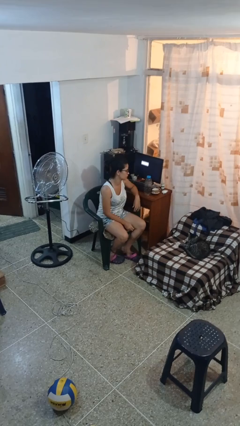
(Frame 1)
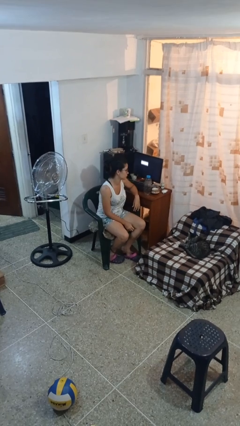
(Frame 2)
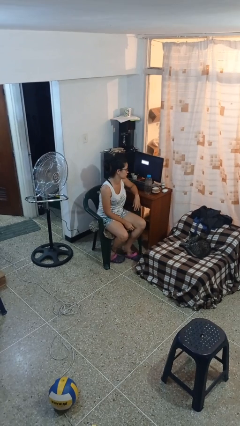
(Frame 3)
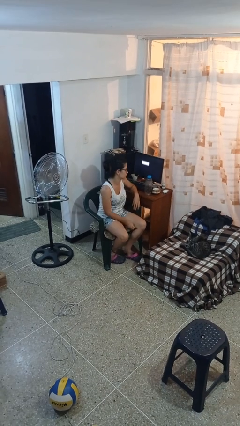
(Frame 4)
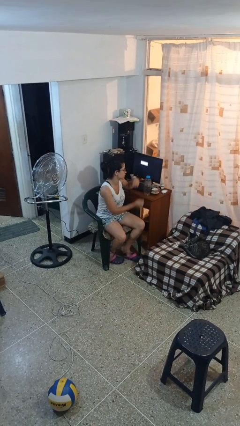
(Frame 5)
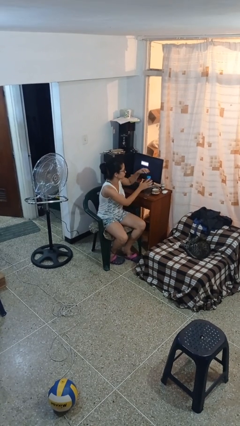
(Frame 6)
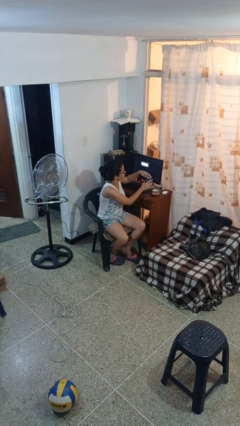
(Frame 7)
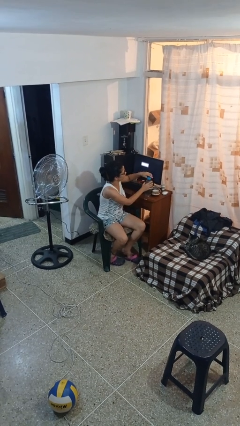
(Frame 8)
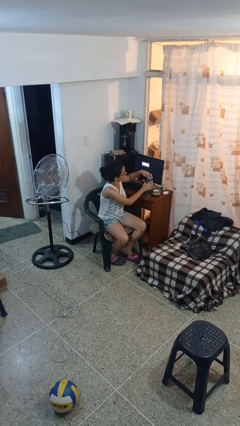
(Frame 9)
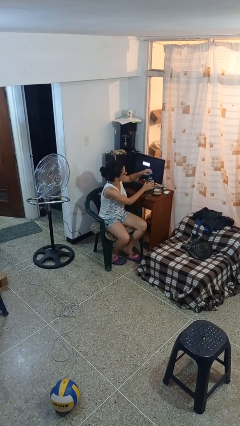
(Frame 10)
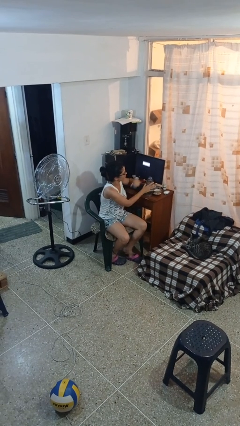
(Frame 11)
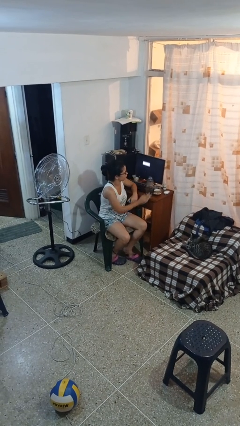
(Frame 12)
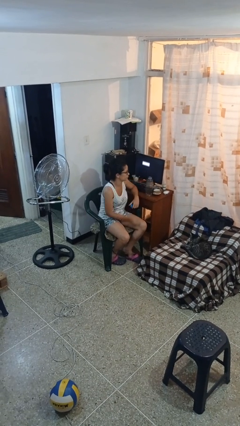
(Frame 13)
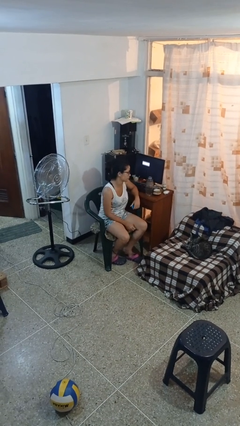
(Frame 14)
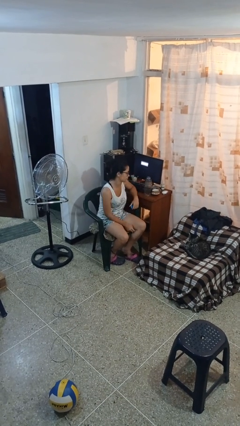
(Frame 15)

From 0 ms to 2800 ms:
person unscrews lid from bottle

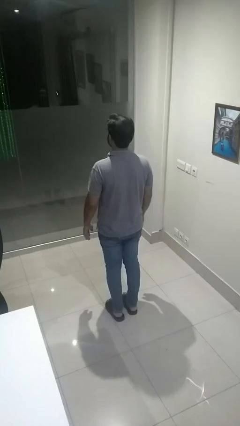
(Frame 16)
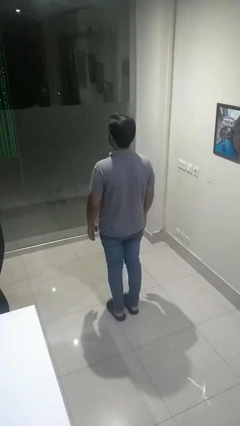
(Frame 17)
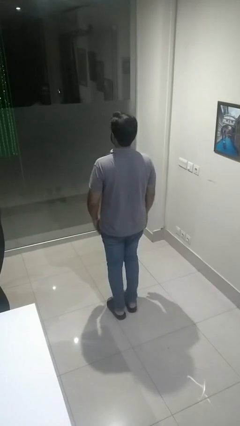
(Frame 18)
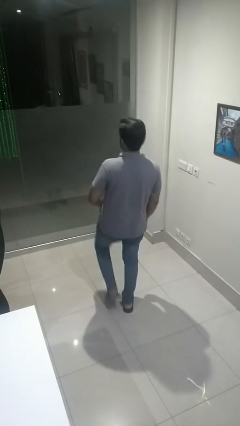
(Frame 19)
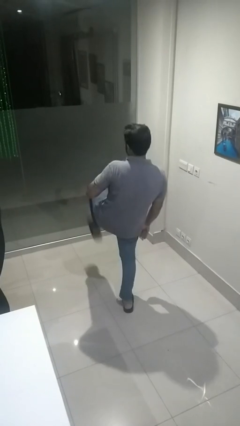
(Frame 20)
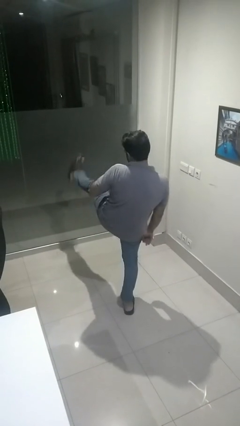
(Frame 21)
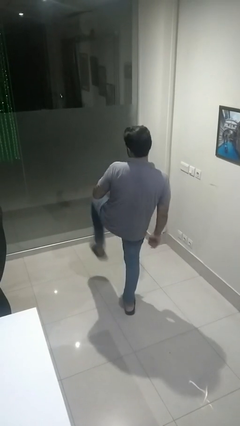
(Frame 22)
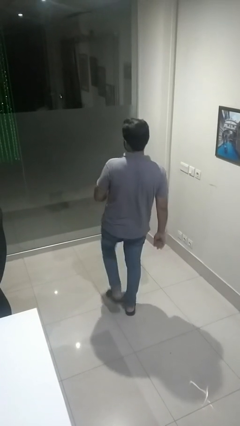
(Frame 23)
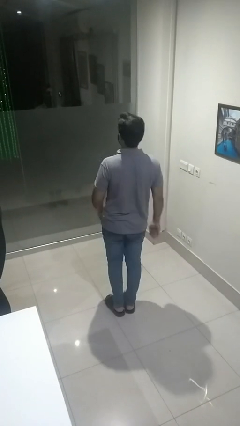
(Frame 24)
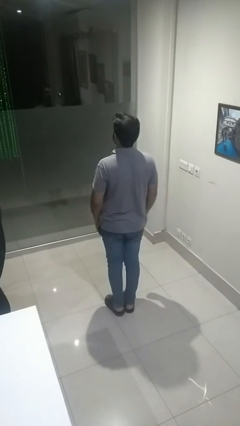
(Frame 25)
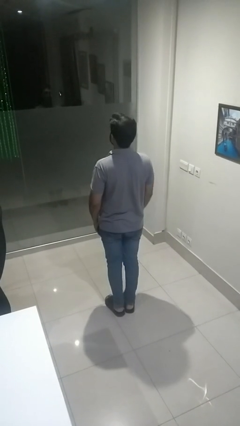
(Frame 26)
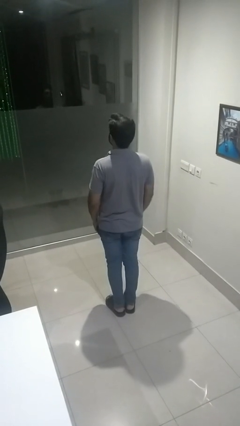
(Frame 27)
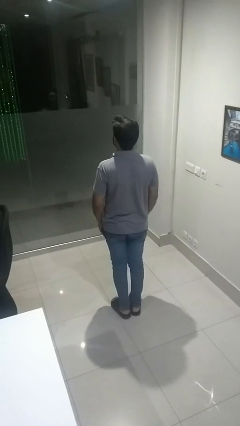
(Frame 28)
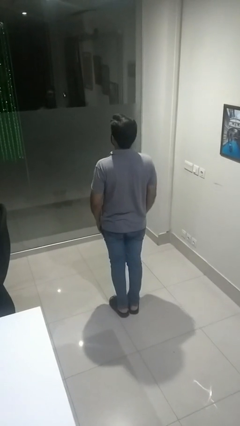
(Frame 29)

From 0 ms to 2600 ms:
person karate kicks

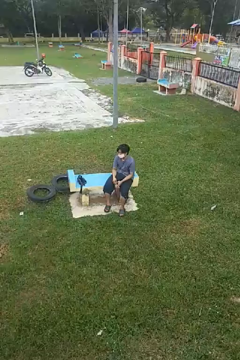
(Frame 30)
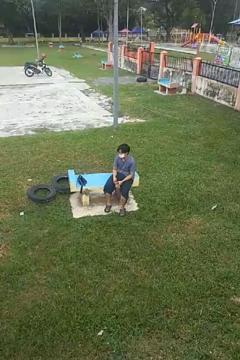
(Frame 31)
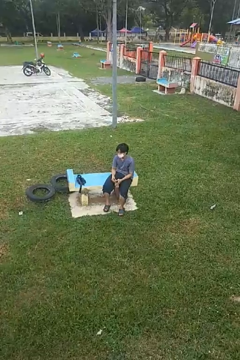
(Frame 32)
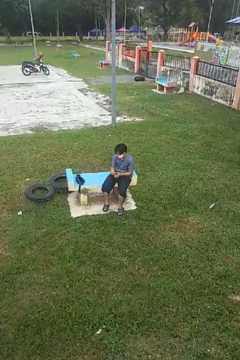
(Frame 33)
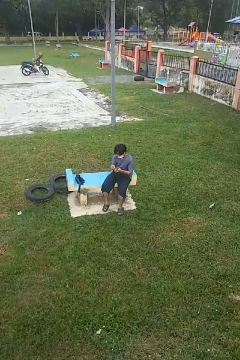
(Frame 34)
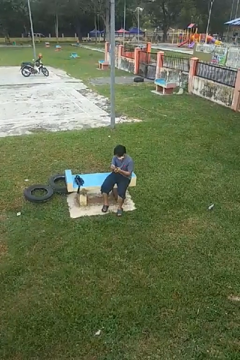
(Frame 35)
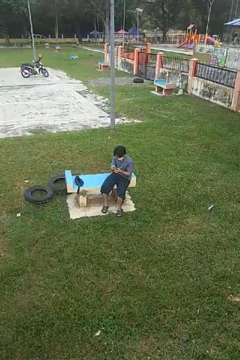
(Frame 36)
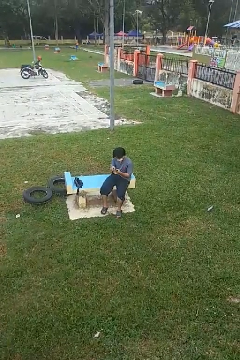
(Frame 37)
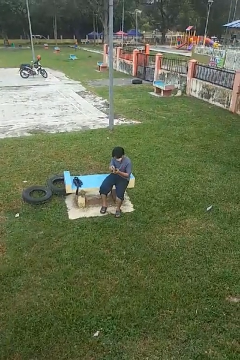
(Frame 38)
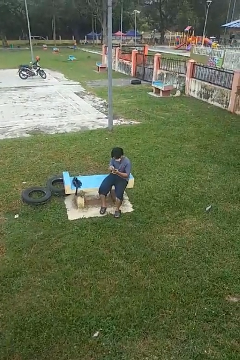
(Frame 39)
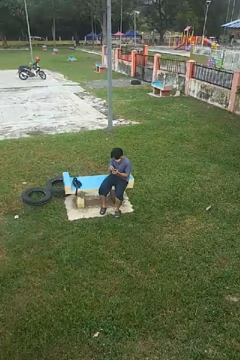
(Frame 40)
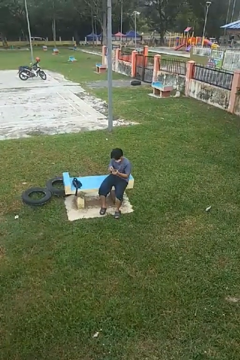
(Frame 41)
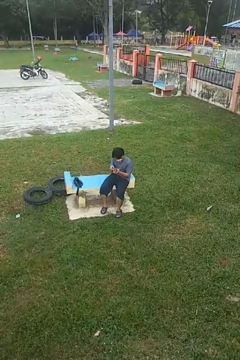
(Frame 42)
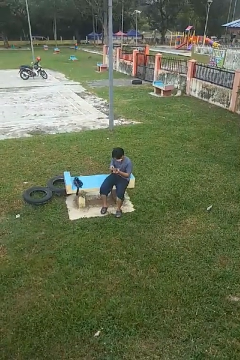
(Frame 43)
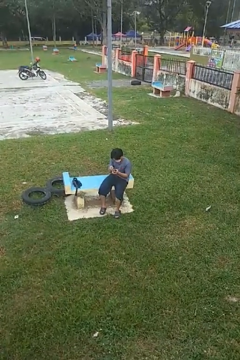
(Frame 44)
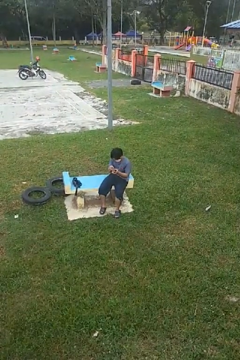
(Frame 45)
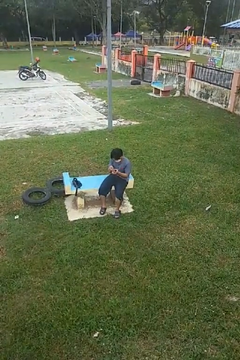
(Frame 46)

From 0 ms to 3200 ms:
person searches in purse

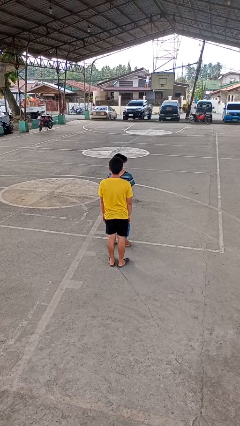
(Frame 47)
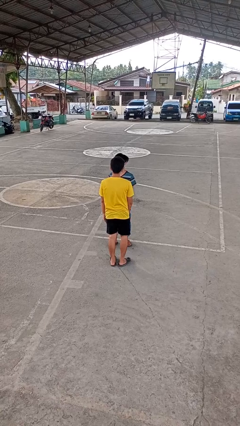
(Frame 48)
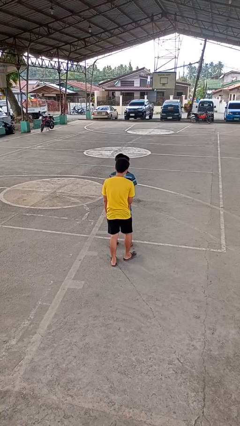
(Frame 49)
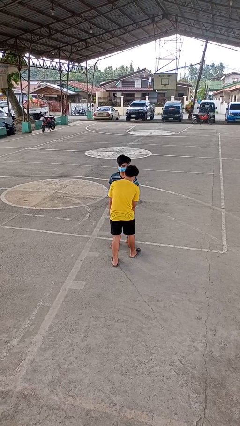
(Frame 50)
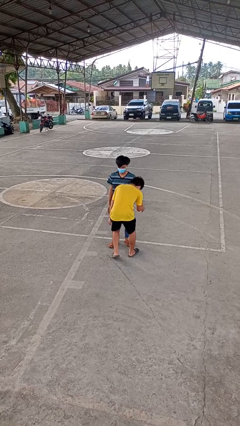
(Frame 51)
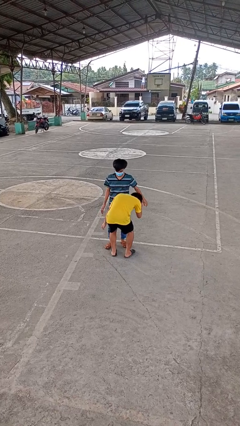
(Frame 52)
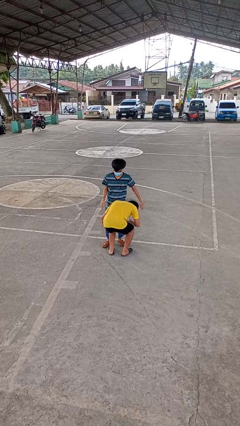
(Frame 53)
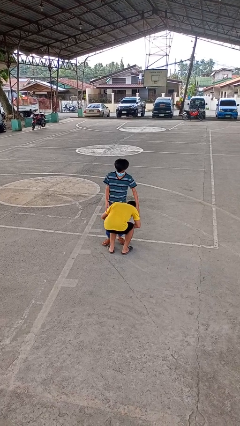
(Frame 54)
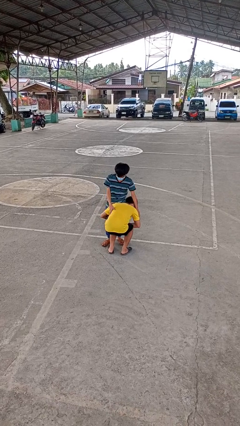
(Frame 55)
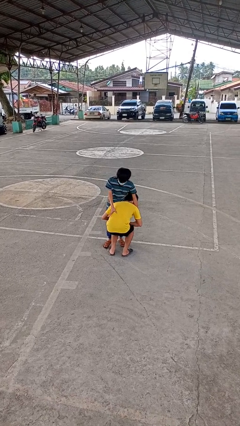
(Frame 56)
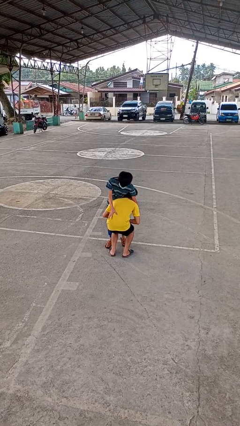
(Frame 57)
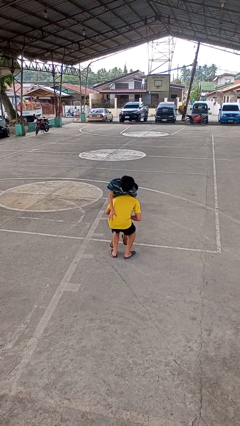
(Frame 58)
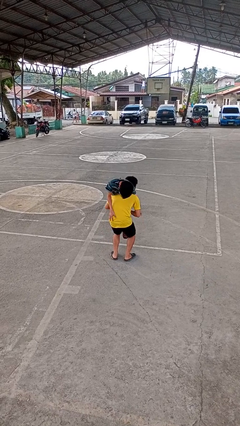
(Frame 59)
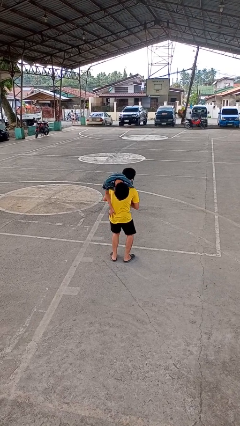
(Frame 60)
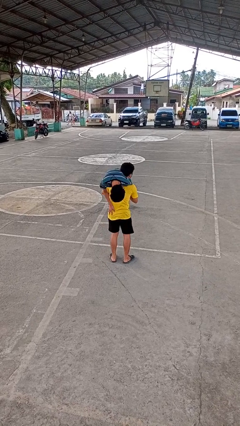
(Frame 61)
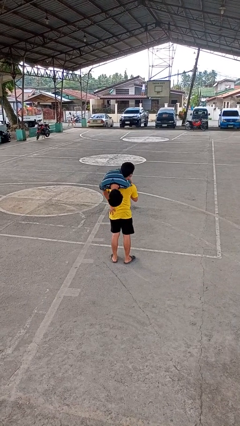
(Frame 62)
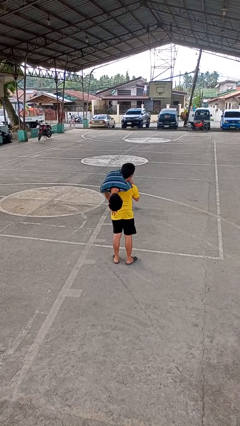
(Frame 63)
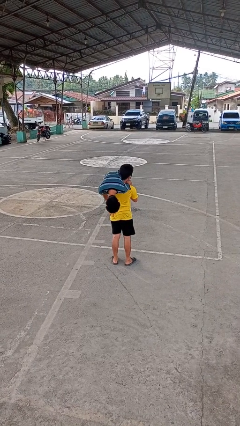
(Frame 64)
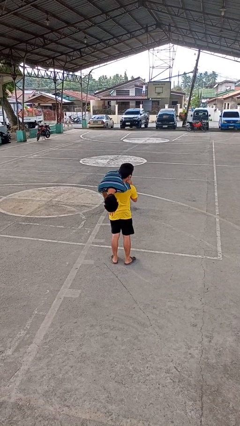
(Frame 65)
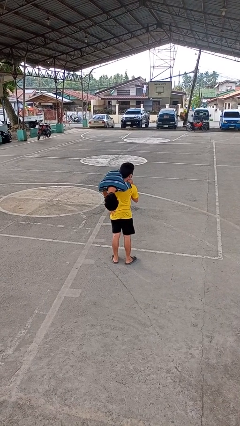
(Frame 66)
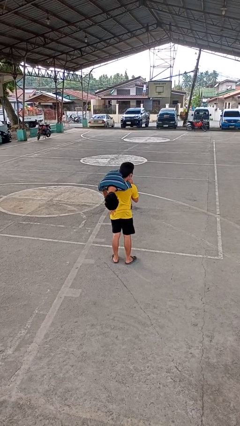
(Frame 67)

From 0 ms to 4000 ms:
person carries person over shoulder

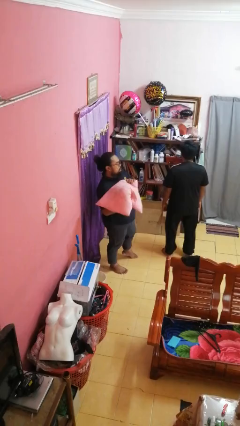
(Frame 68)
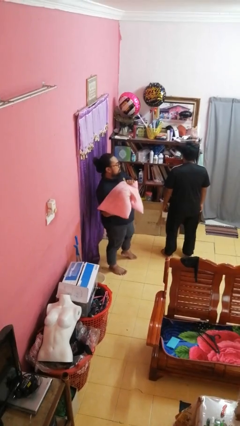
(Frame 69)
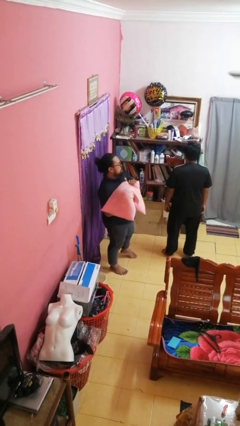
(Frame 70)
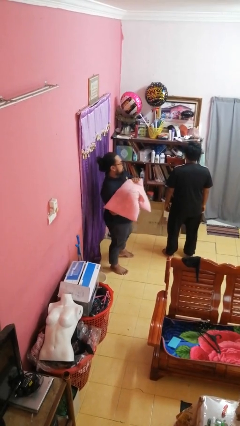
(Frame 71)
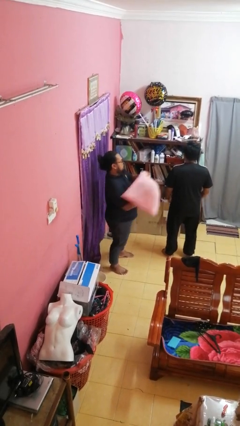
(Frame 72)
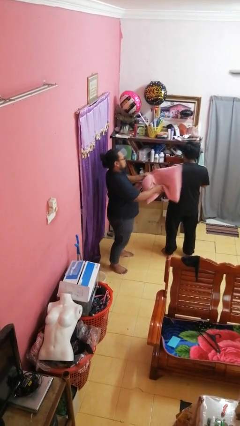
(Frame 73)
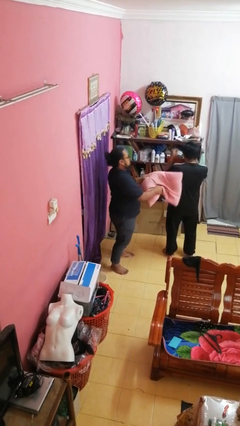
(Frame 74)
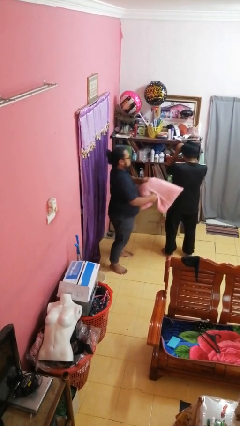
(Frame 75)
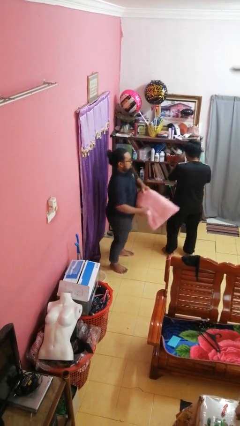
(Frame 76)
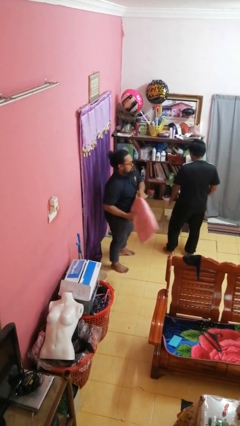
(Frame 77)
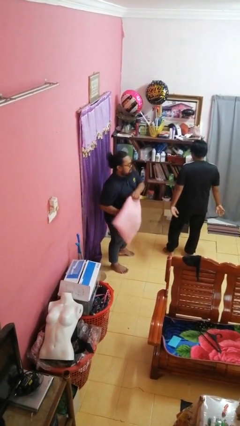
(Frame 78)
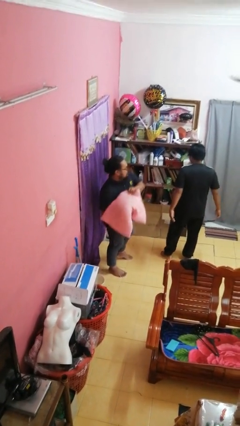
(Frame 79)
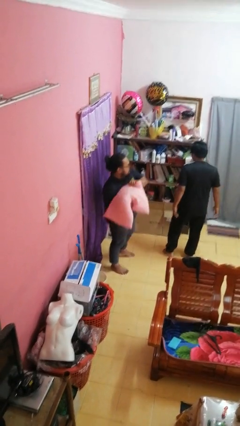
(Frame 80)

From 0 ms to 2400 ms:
person hits person with pillow

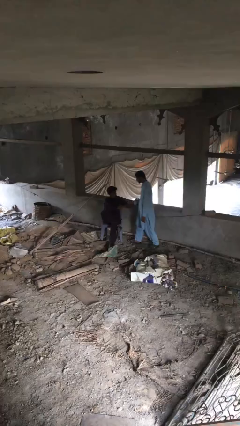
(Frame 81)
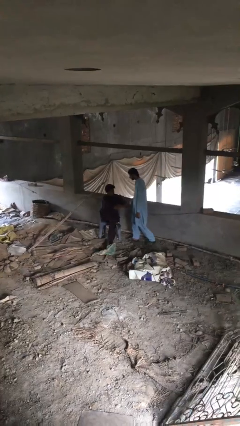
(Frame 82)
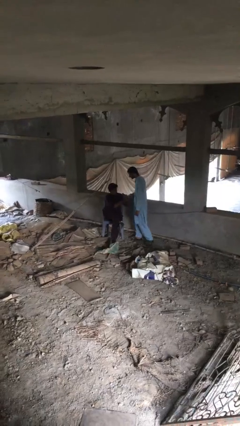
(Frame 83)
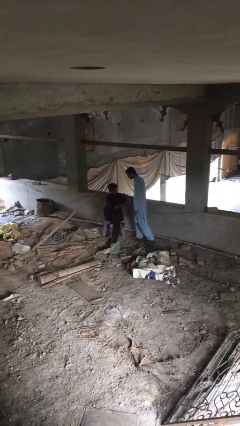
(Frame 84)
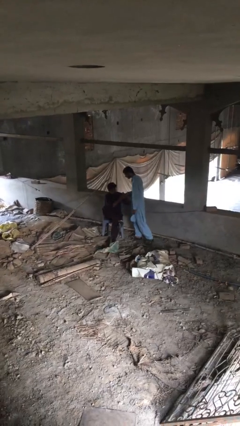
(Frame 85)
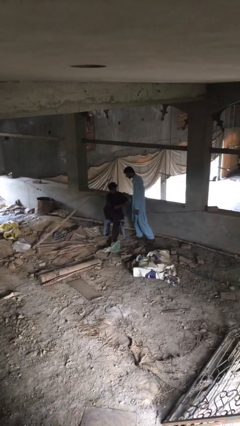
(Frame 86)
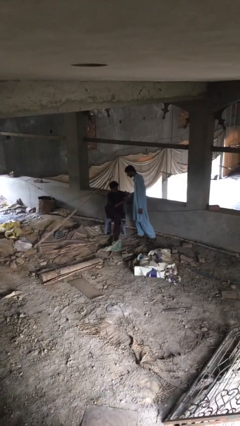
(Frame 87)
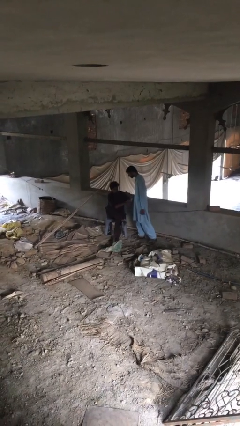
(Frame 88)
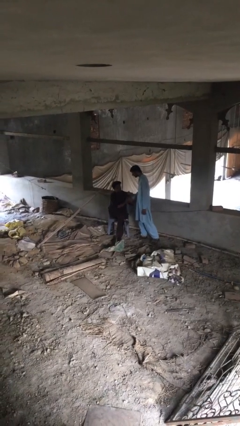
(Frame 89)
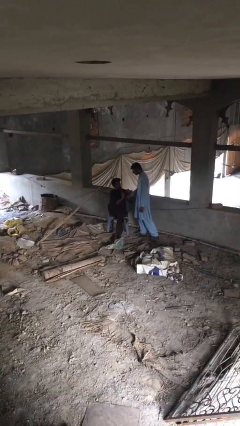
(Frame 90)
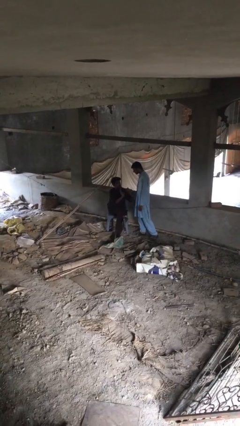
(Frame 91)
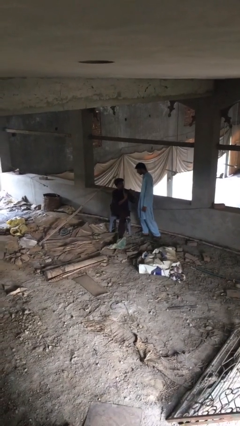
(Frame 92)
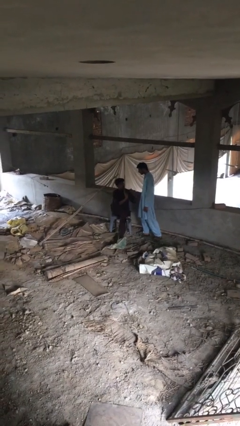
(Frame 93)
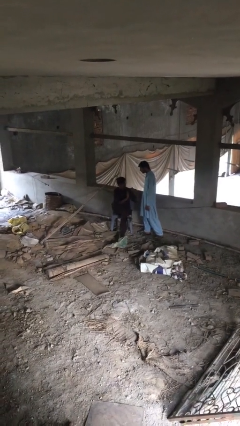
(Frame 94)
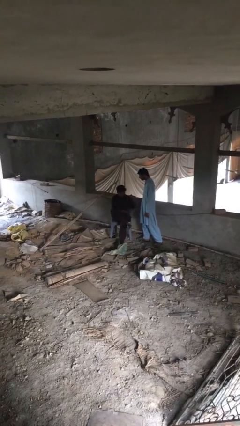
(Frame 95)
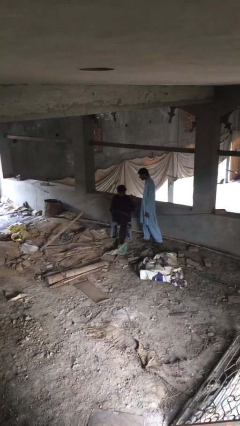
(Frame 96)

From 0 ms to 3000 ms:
person shakes hand
